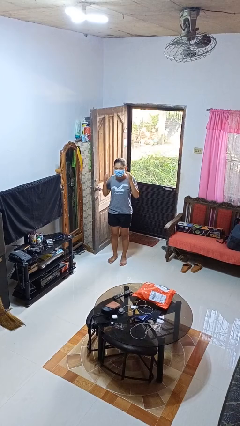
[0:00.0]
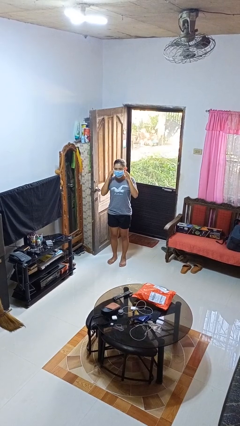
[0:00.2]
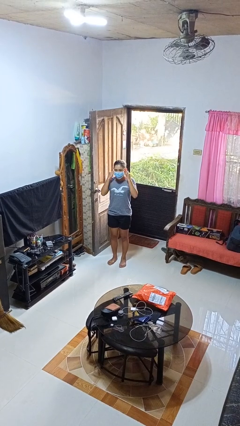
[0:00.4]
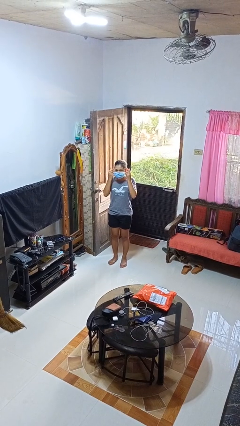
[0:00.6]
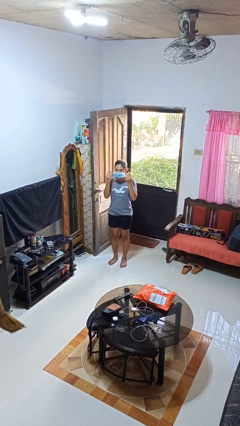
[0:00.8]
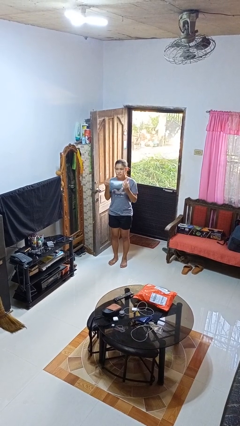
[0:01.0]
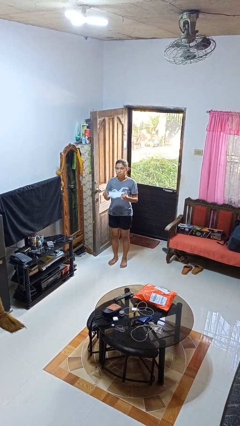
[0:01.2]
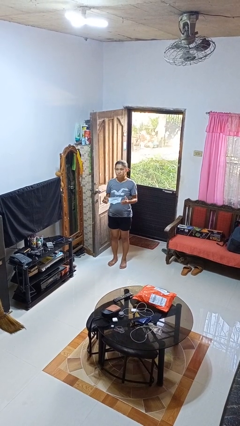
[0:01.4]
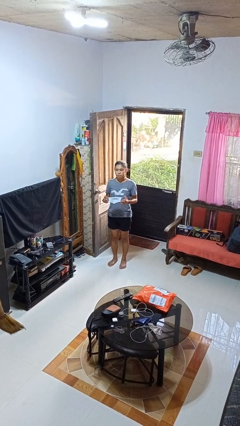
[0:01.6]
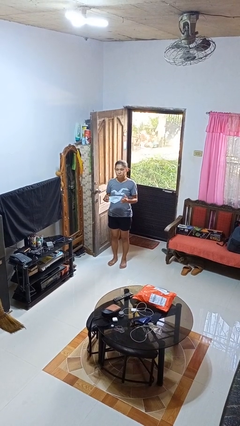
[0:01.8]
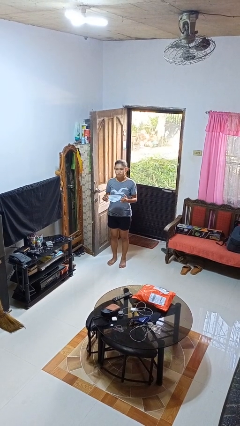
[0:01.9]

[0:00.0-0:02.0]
person takes off facemask

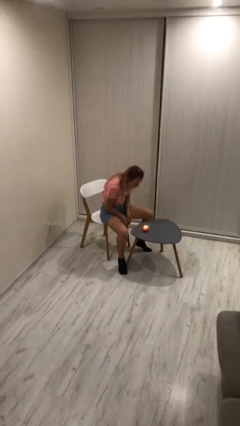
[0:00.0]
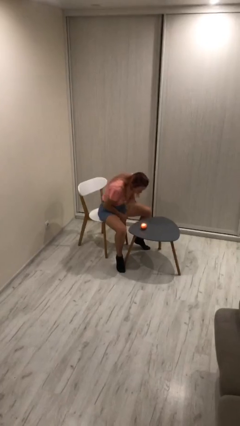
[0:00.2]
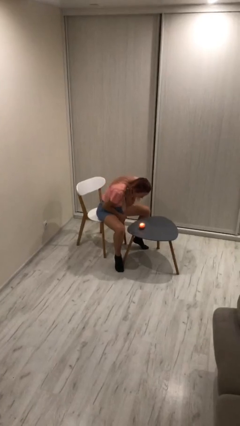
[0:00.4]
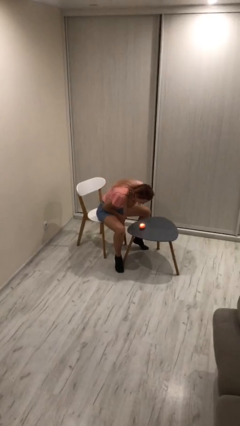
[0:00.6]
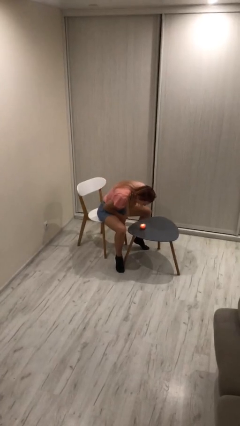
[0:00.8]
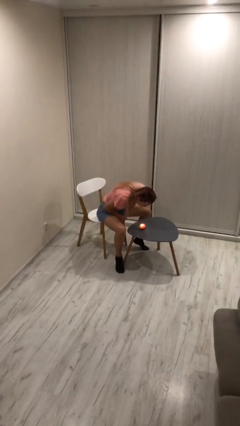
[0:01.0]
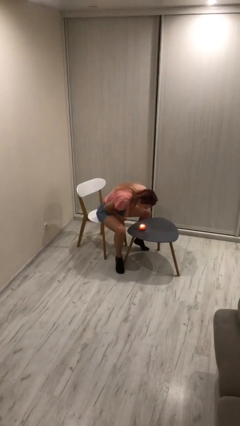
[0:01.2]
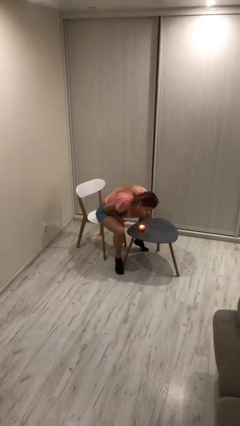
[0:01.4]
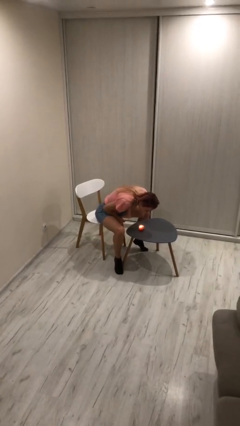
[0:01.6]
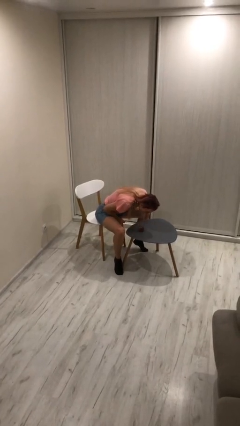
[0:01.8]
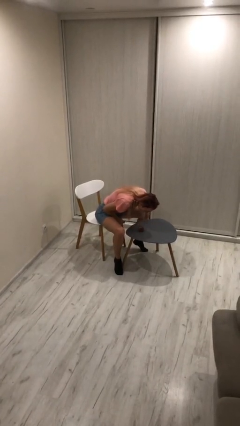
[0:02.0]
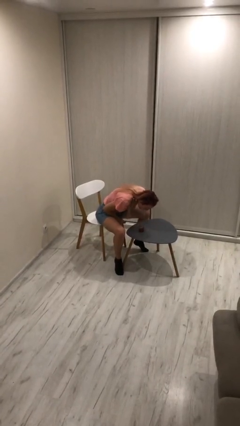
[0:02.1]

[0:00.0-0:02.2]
person extinguishes candle

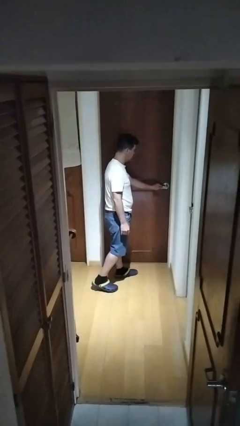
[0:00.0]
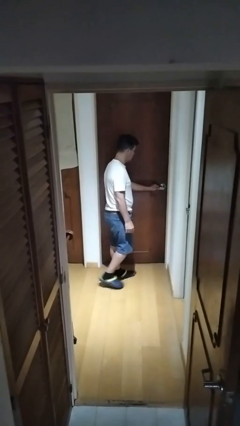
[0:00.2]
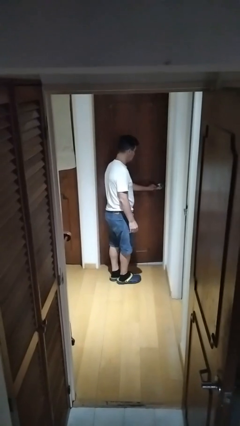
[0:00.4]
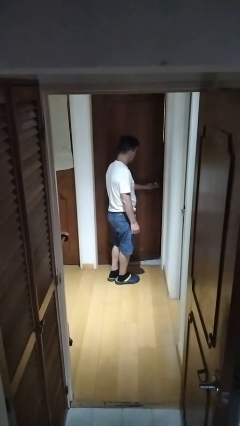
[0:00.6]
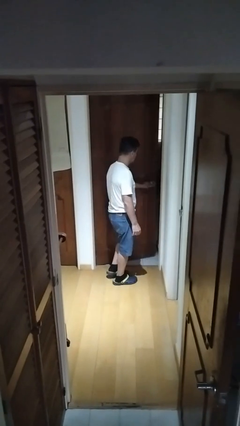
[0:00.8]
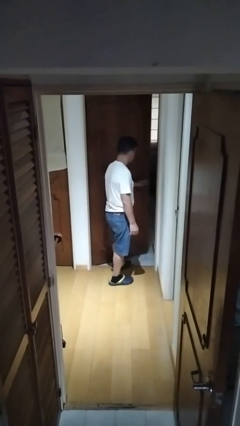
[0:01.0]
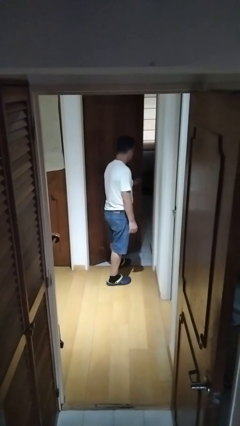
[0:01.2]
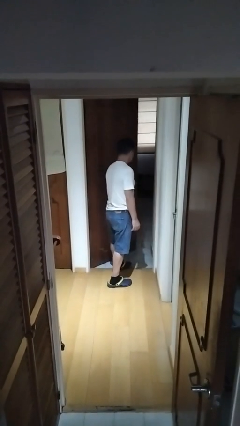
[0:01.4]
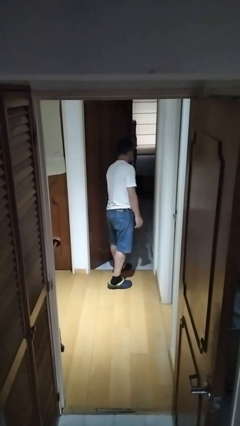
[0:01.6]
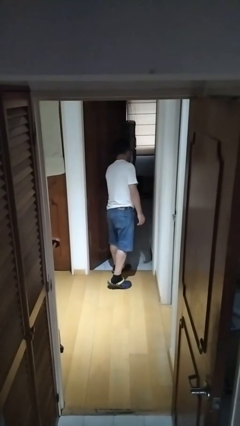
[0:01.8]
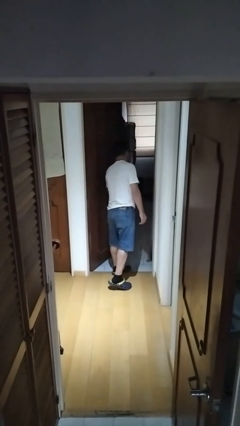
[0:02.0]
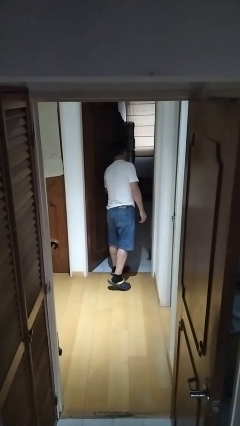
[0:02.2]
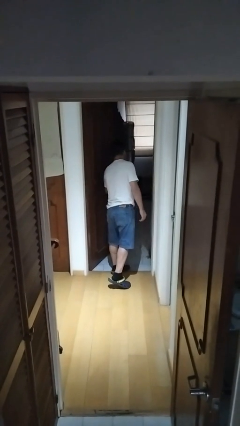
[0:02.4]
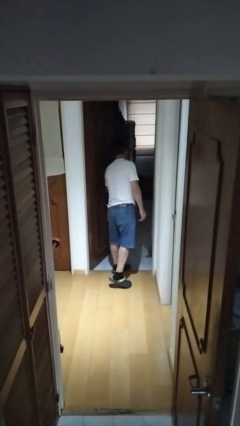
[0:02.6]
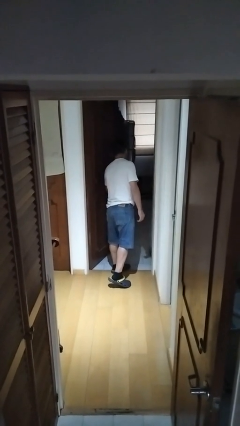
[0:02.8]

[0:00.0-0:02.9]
person opens facility door

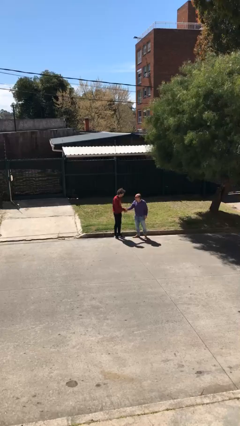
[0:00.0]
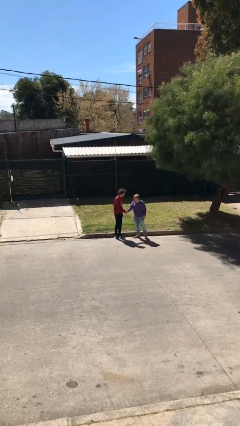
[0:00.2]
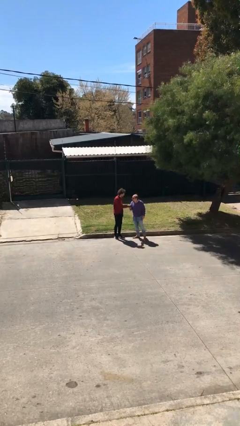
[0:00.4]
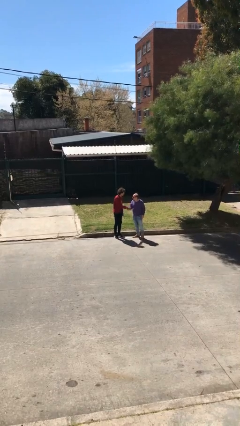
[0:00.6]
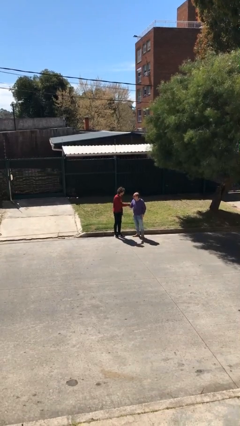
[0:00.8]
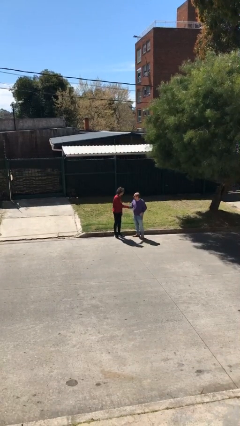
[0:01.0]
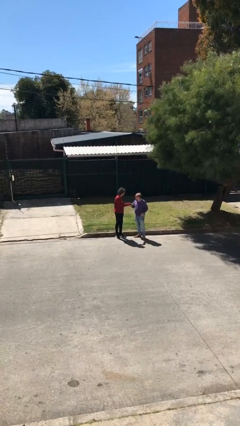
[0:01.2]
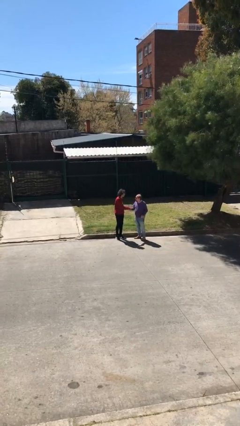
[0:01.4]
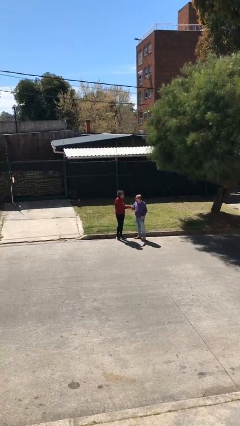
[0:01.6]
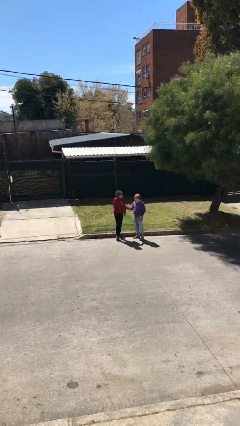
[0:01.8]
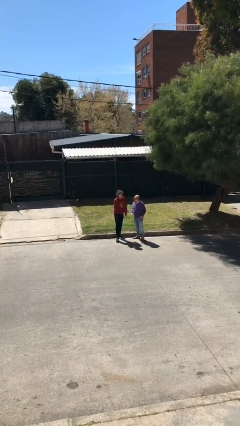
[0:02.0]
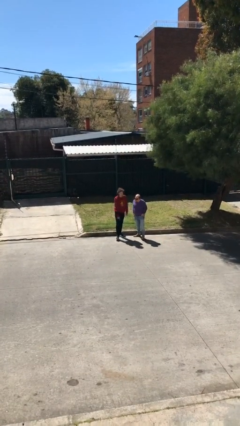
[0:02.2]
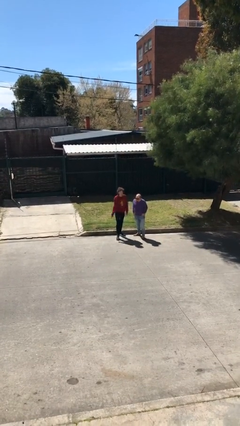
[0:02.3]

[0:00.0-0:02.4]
person shakes hand

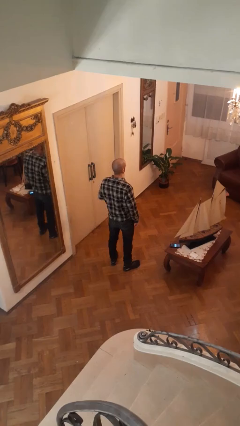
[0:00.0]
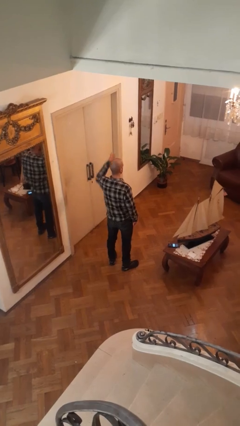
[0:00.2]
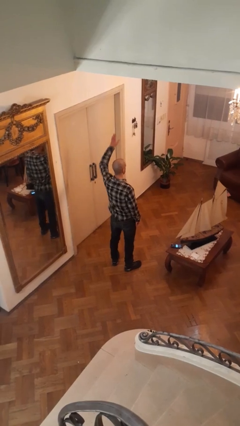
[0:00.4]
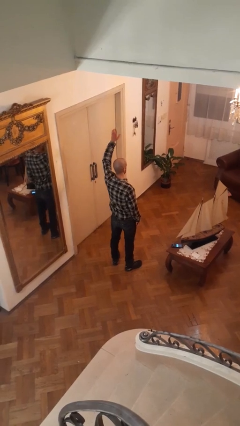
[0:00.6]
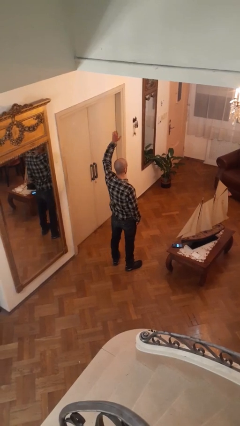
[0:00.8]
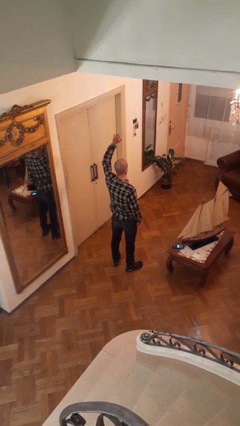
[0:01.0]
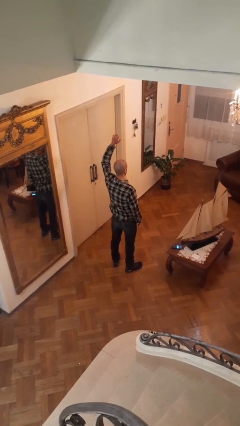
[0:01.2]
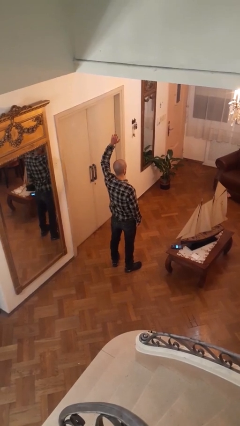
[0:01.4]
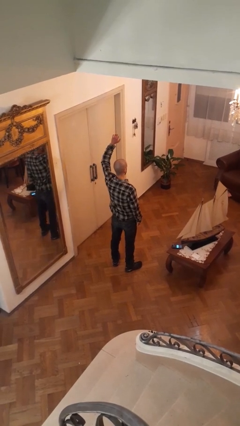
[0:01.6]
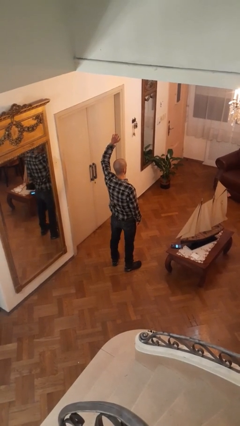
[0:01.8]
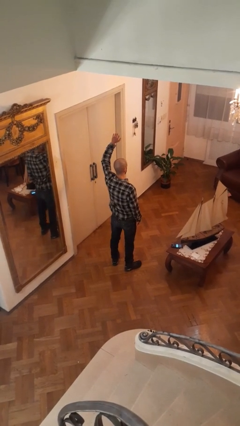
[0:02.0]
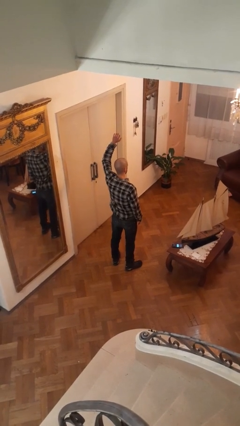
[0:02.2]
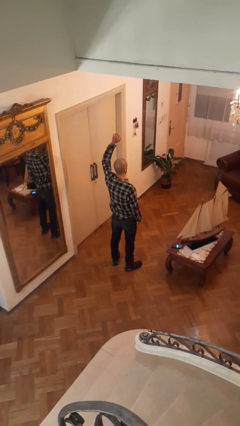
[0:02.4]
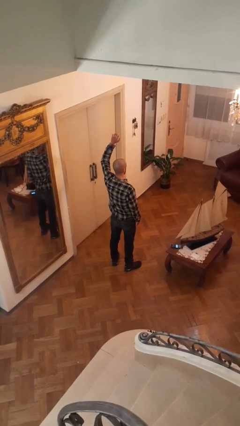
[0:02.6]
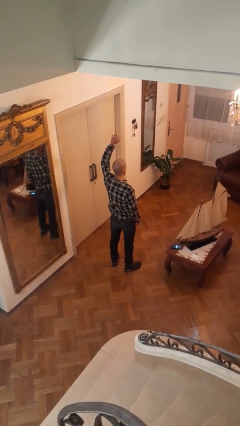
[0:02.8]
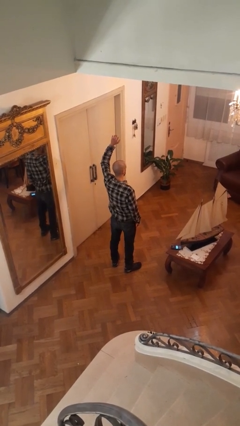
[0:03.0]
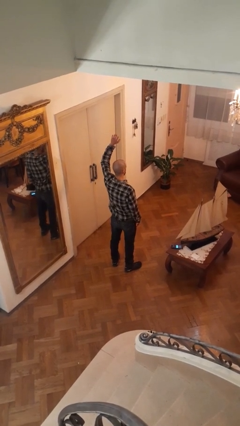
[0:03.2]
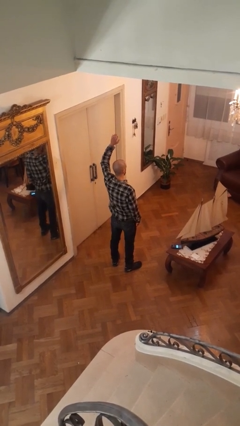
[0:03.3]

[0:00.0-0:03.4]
person gestures raise hand

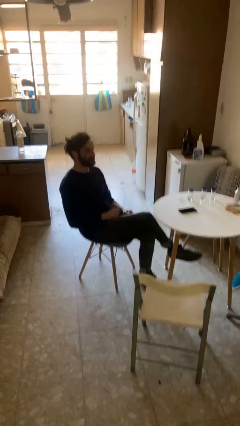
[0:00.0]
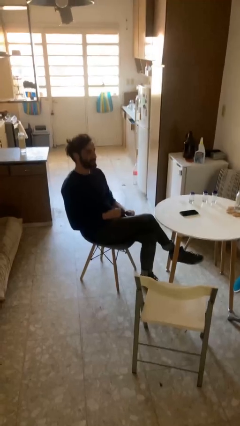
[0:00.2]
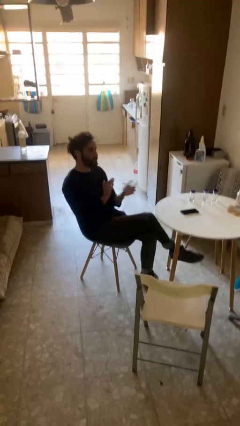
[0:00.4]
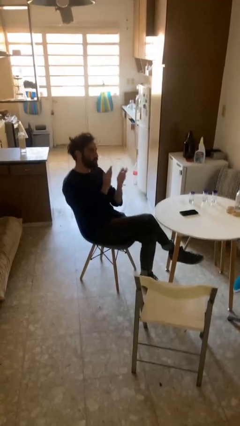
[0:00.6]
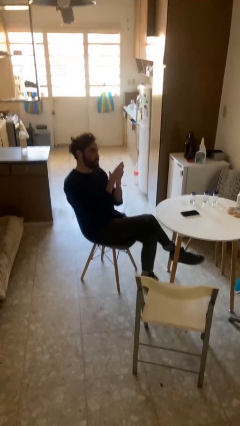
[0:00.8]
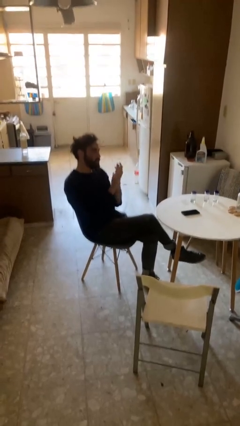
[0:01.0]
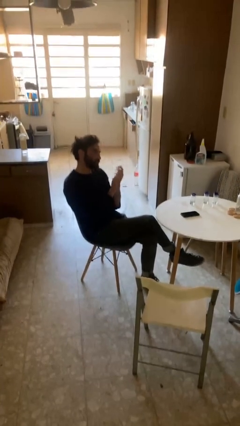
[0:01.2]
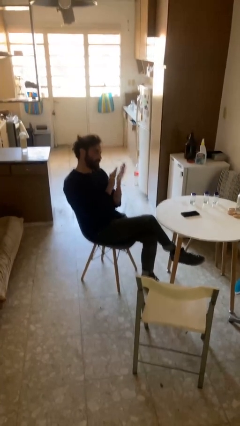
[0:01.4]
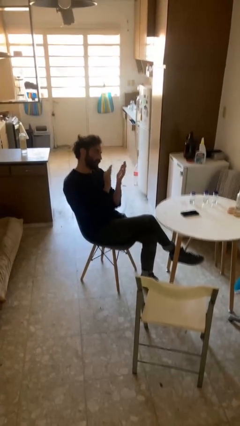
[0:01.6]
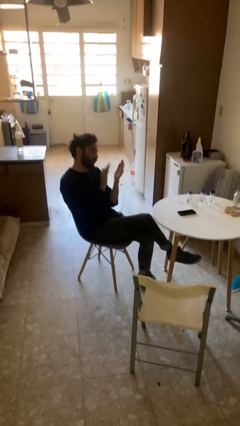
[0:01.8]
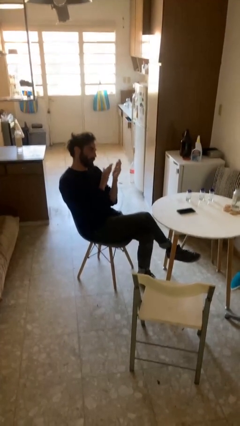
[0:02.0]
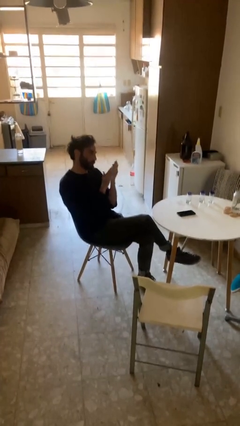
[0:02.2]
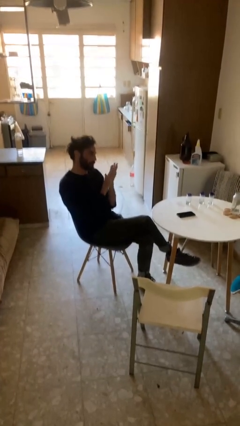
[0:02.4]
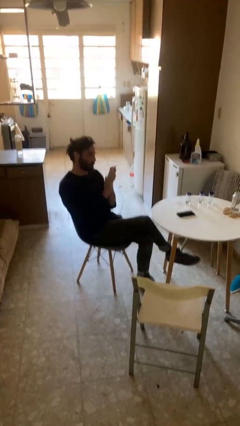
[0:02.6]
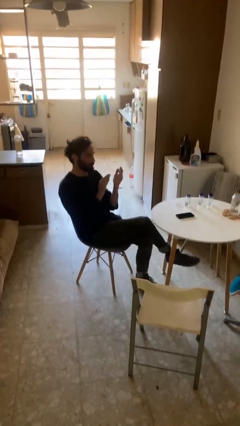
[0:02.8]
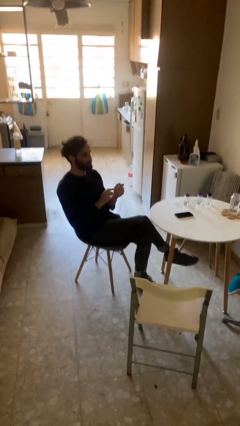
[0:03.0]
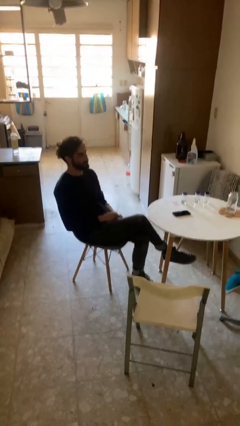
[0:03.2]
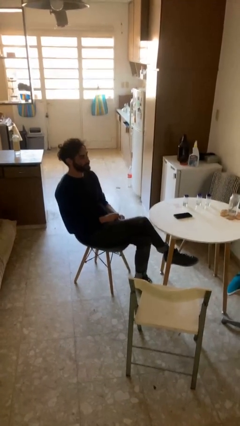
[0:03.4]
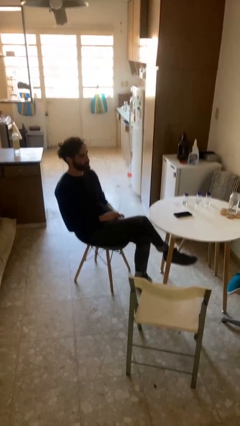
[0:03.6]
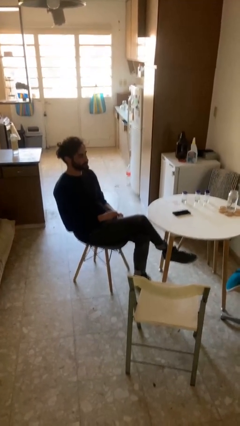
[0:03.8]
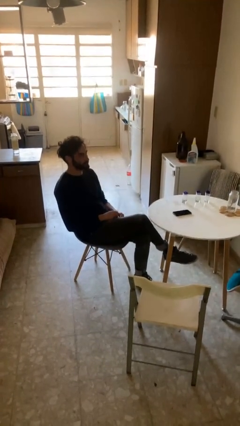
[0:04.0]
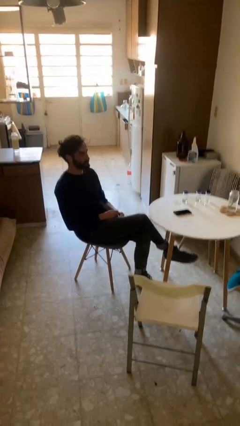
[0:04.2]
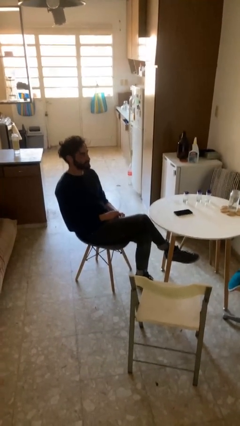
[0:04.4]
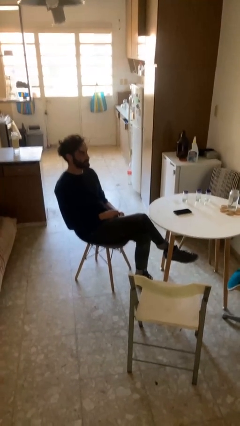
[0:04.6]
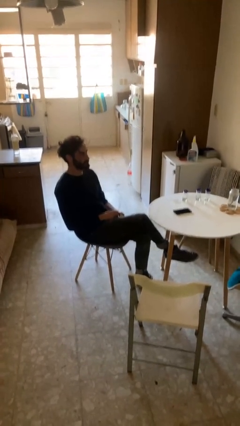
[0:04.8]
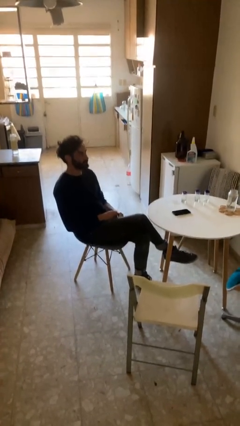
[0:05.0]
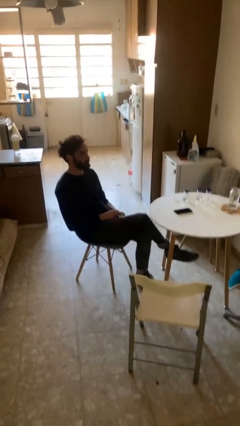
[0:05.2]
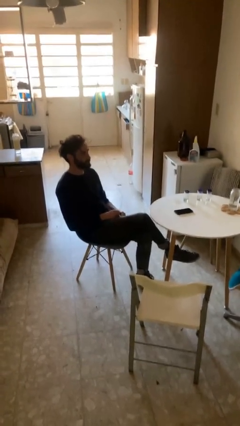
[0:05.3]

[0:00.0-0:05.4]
person claps hands
